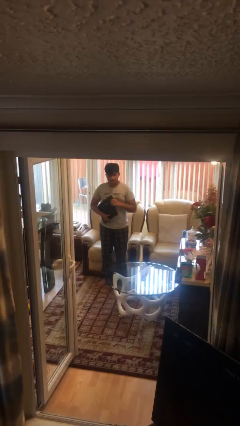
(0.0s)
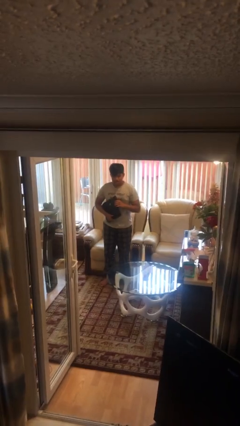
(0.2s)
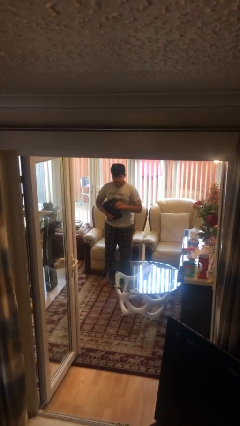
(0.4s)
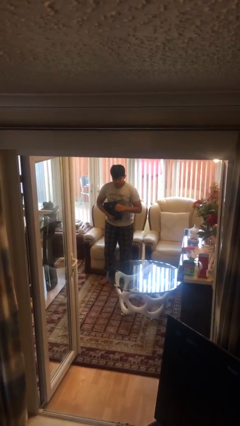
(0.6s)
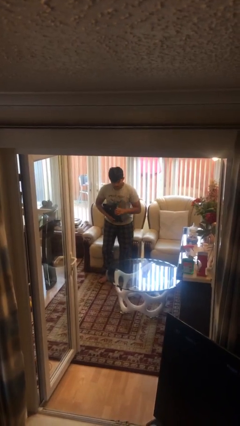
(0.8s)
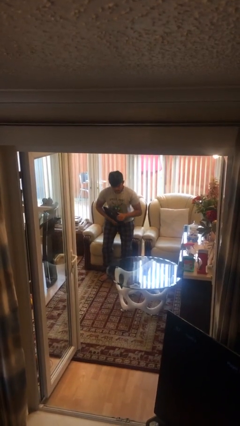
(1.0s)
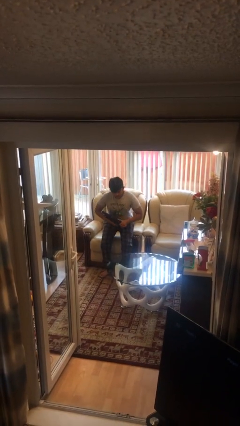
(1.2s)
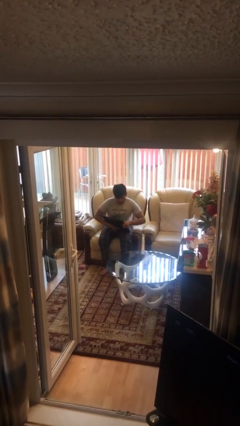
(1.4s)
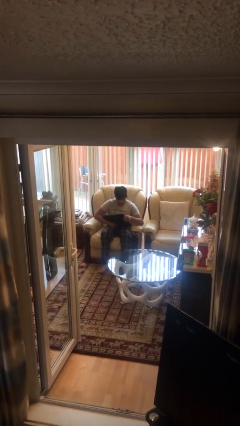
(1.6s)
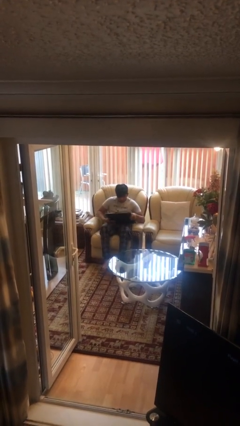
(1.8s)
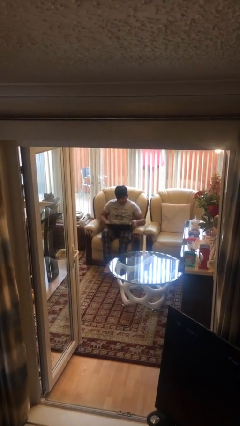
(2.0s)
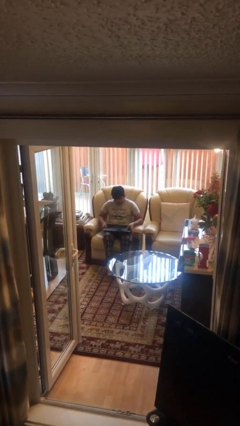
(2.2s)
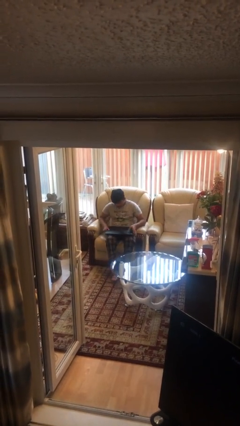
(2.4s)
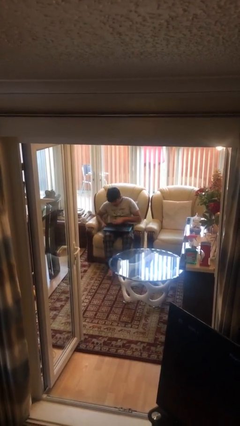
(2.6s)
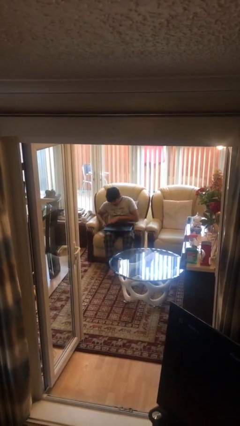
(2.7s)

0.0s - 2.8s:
person sits down

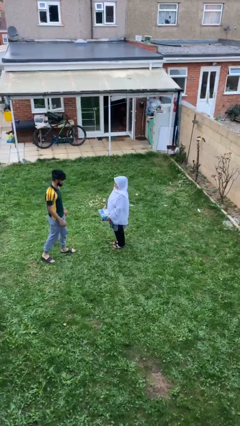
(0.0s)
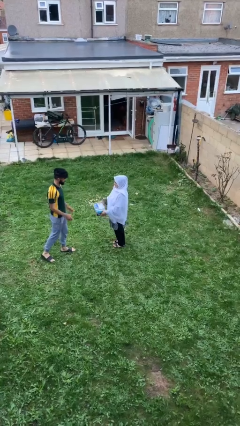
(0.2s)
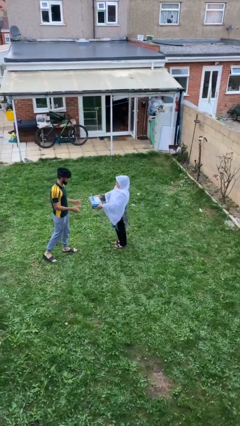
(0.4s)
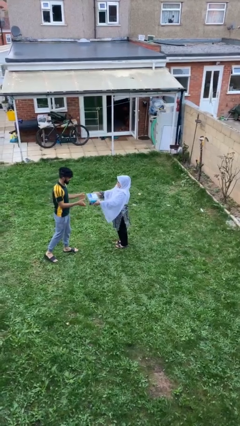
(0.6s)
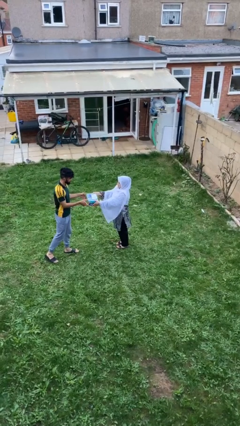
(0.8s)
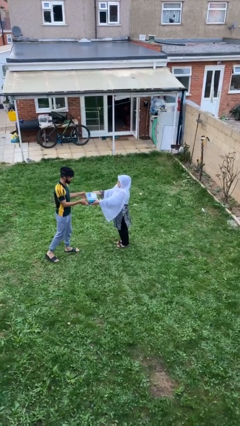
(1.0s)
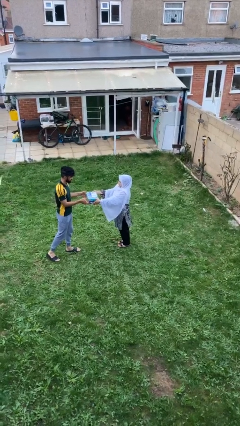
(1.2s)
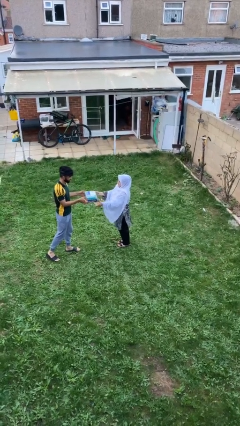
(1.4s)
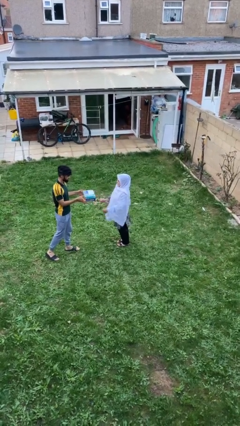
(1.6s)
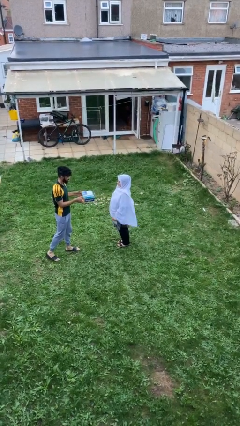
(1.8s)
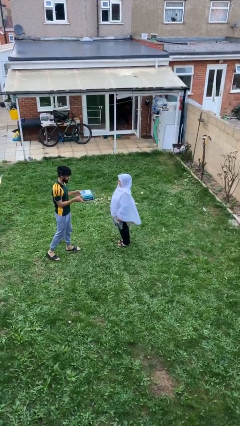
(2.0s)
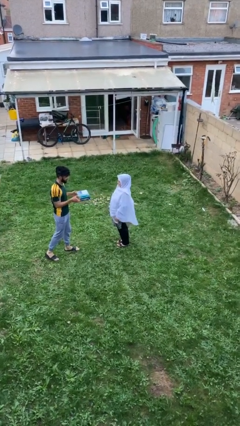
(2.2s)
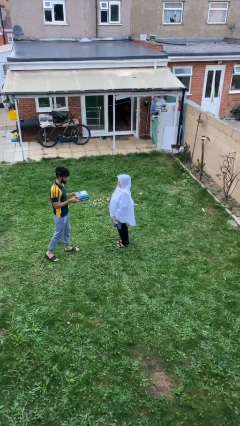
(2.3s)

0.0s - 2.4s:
person transfers object to person

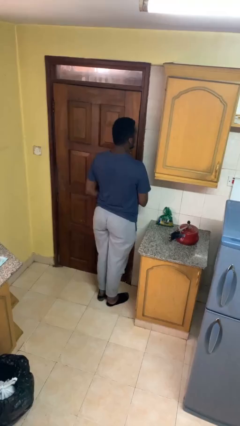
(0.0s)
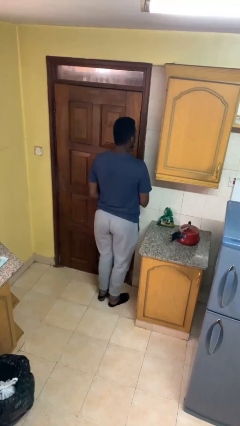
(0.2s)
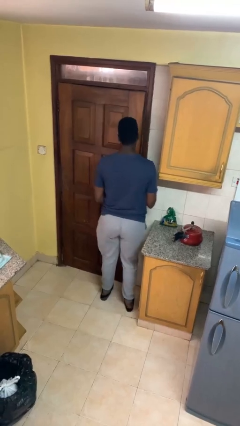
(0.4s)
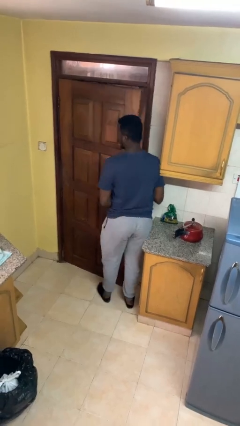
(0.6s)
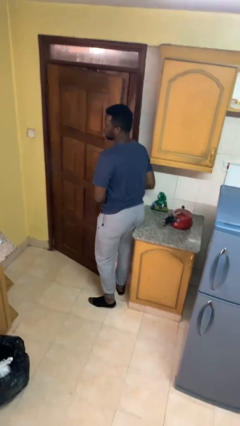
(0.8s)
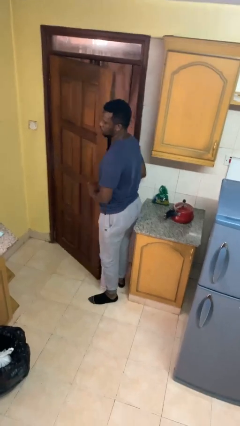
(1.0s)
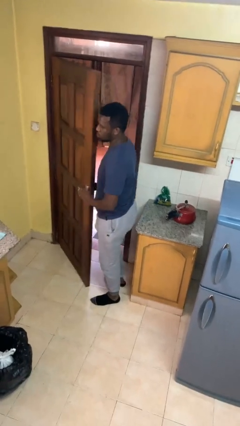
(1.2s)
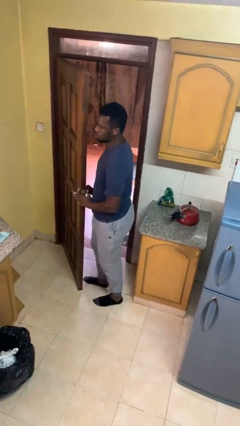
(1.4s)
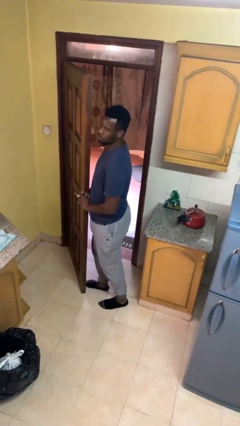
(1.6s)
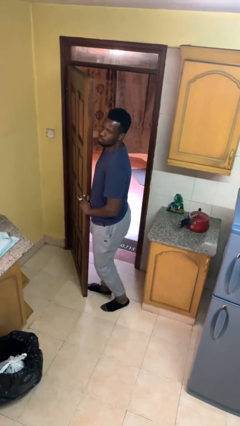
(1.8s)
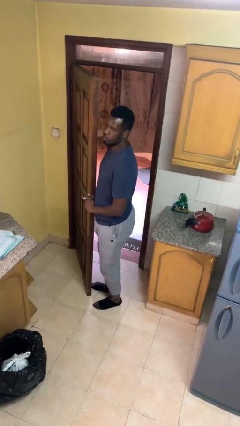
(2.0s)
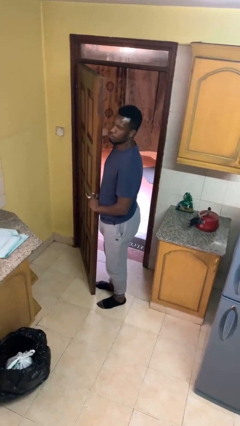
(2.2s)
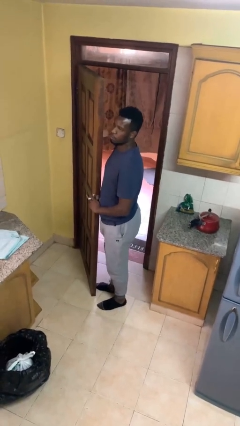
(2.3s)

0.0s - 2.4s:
person opens facility door

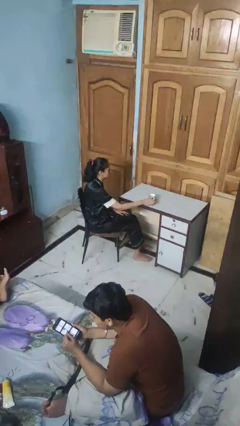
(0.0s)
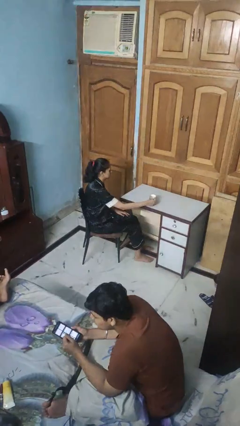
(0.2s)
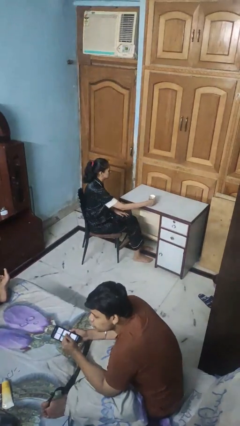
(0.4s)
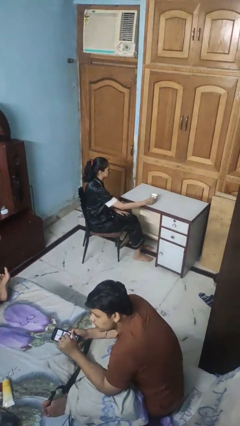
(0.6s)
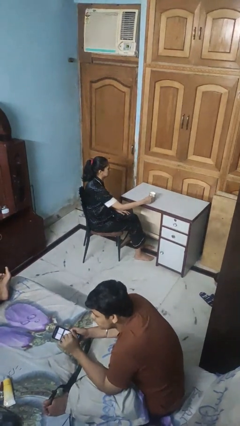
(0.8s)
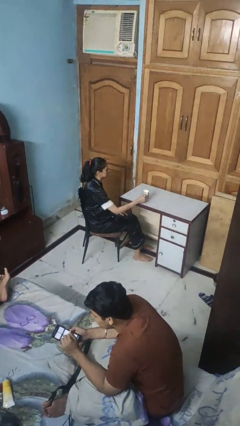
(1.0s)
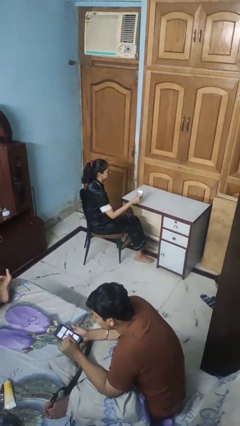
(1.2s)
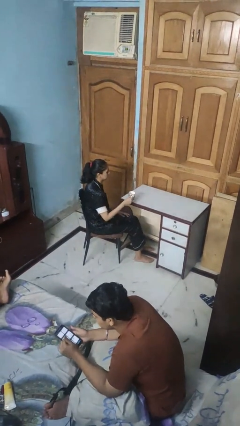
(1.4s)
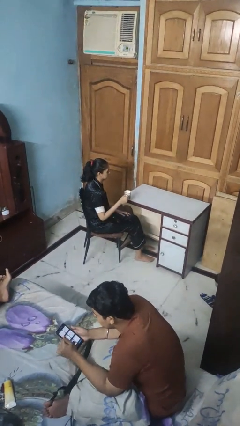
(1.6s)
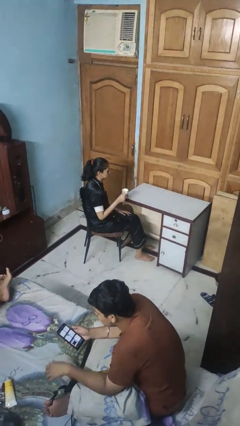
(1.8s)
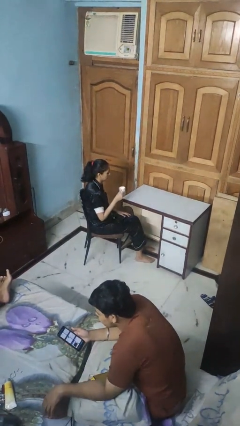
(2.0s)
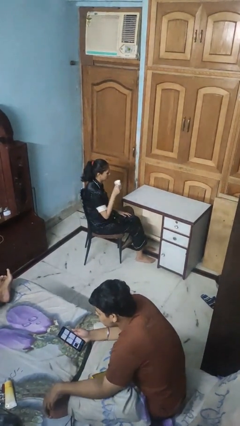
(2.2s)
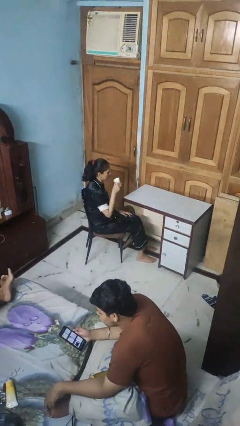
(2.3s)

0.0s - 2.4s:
person picks up object from table

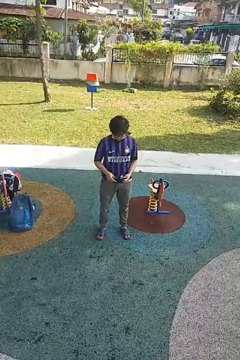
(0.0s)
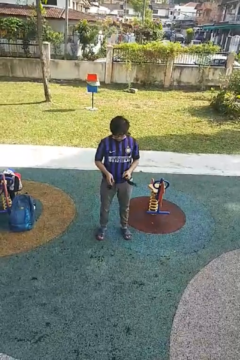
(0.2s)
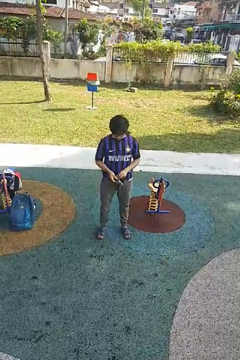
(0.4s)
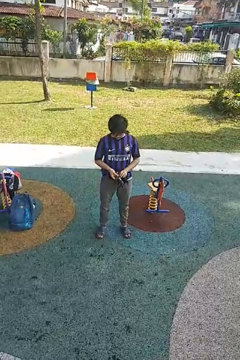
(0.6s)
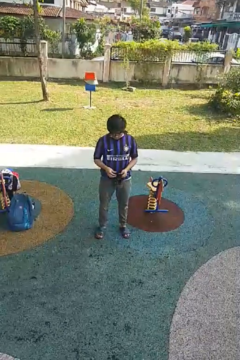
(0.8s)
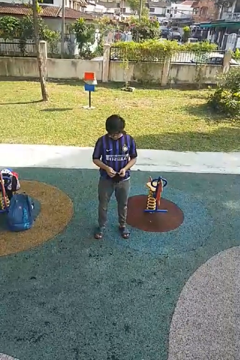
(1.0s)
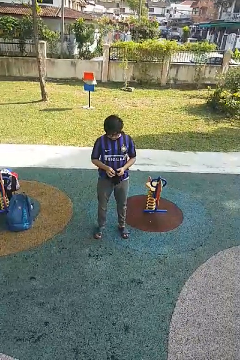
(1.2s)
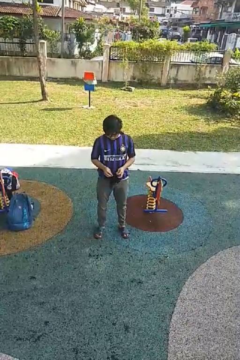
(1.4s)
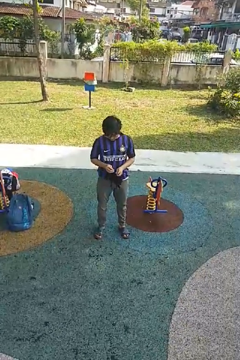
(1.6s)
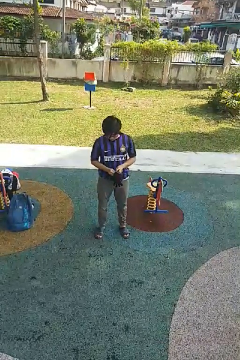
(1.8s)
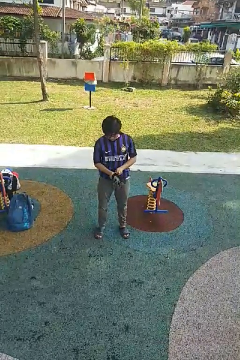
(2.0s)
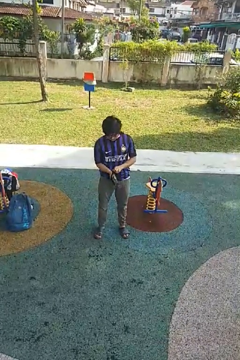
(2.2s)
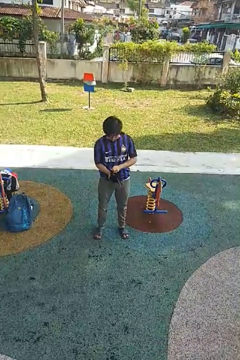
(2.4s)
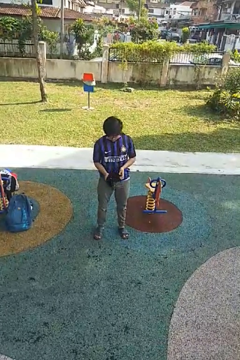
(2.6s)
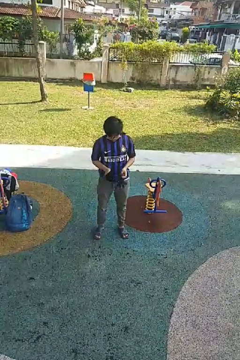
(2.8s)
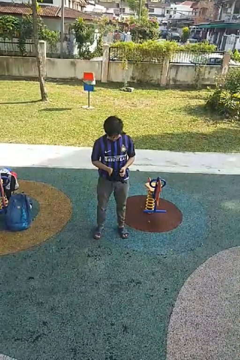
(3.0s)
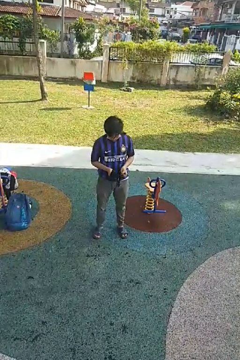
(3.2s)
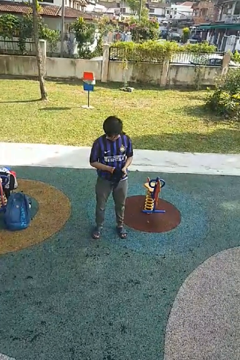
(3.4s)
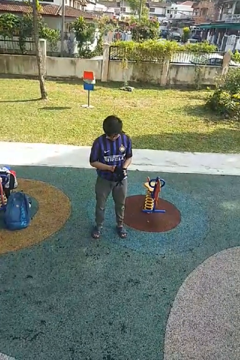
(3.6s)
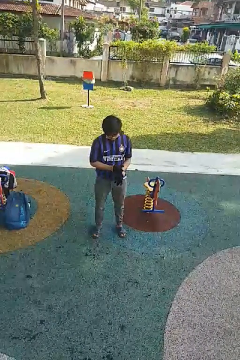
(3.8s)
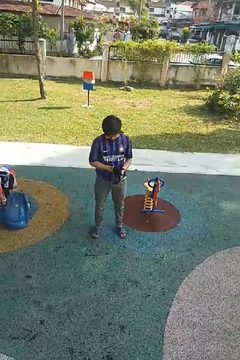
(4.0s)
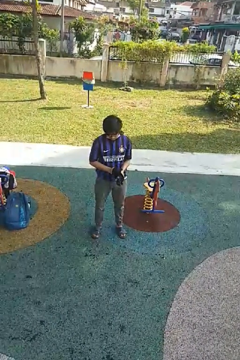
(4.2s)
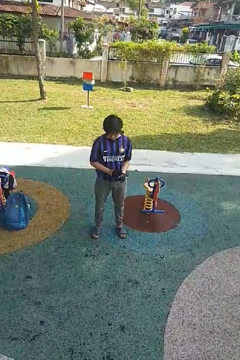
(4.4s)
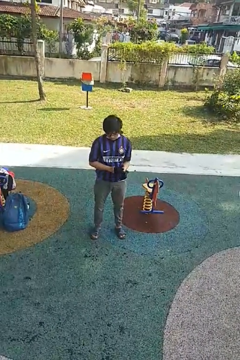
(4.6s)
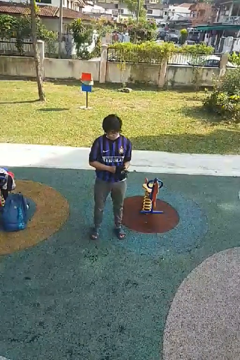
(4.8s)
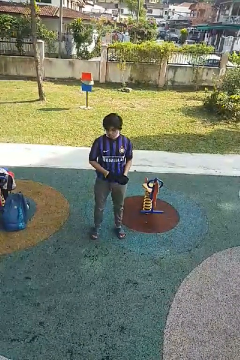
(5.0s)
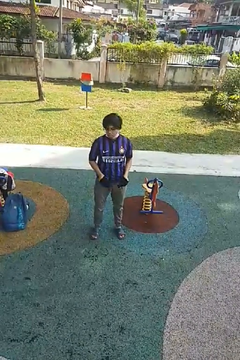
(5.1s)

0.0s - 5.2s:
person puts on gloves

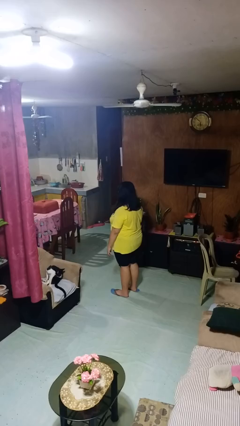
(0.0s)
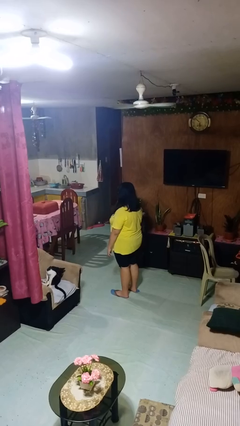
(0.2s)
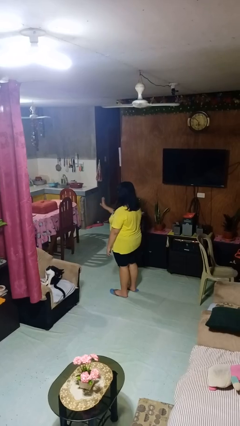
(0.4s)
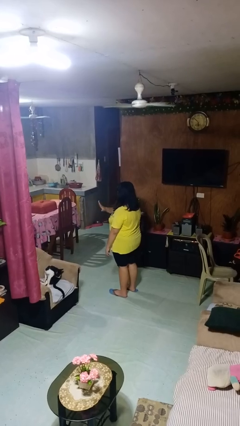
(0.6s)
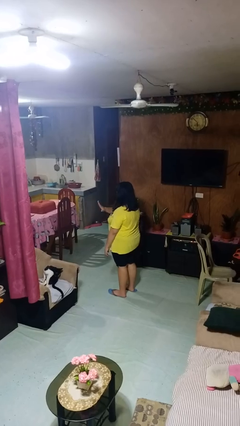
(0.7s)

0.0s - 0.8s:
person gestures swipe left

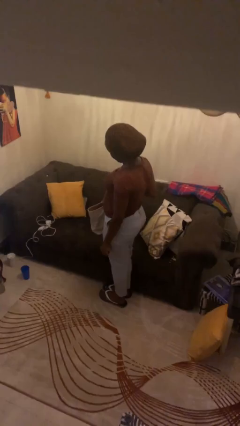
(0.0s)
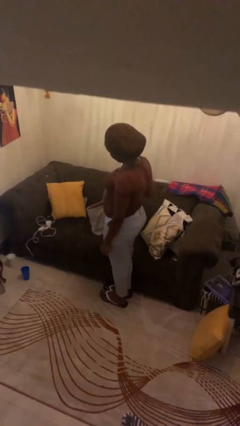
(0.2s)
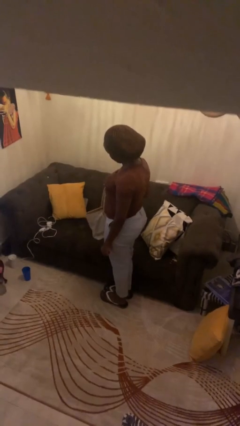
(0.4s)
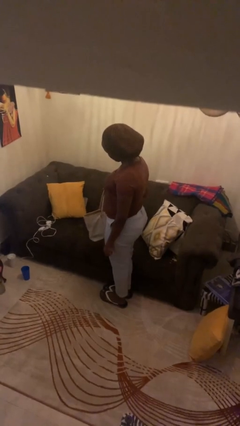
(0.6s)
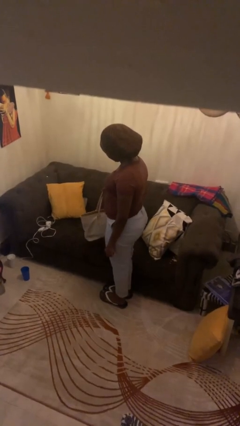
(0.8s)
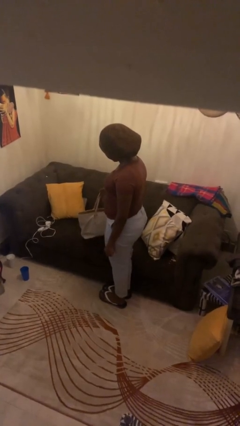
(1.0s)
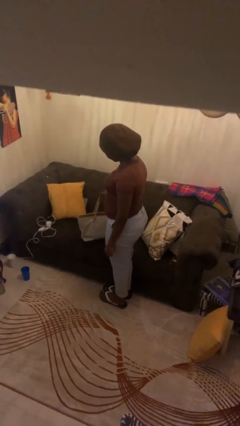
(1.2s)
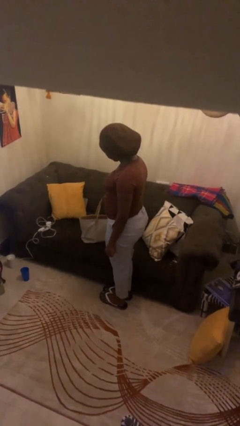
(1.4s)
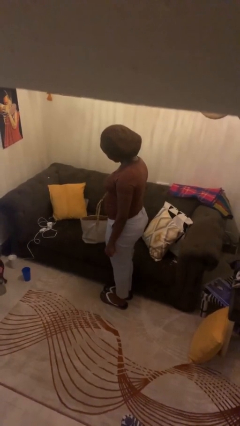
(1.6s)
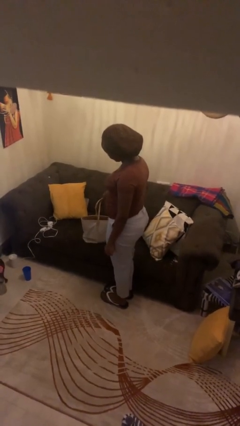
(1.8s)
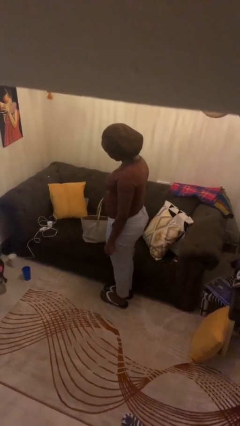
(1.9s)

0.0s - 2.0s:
person puts down object on couch
